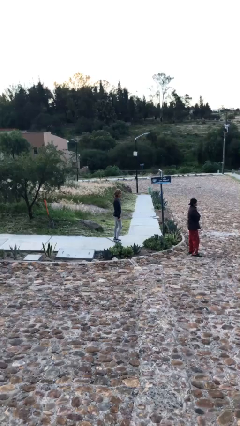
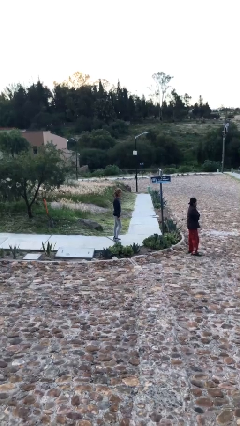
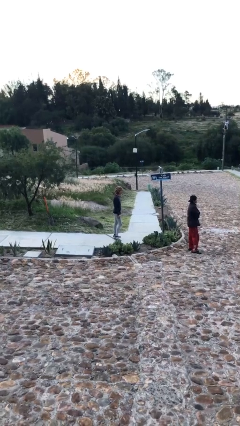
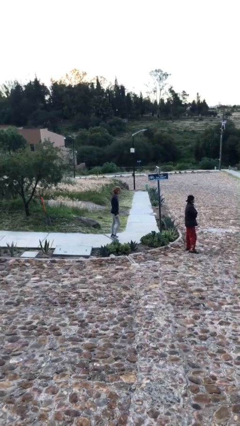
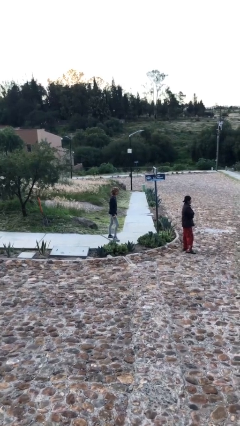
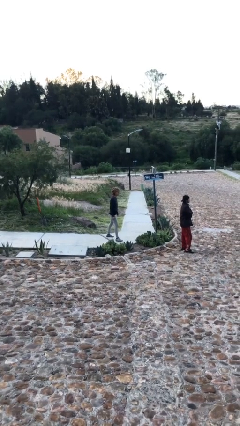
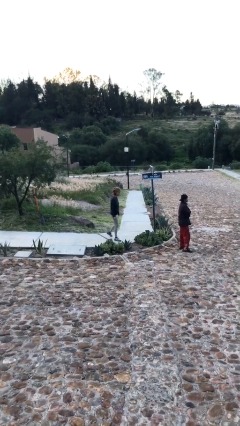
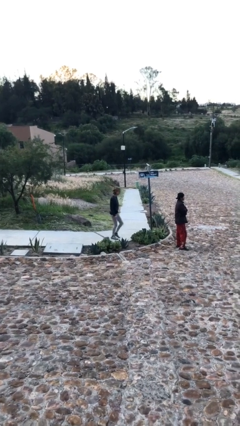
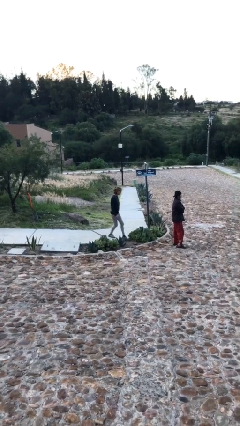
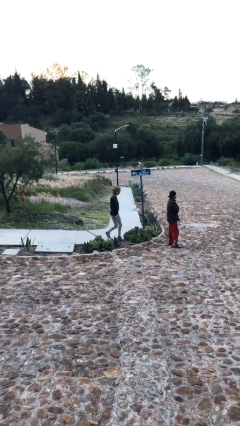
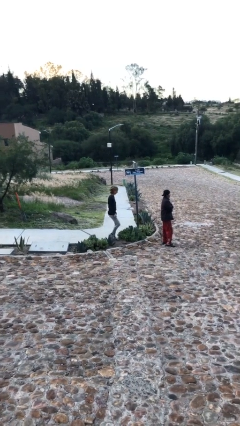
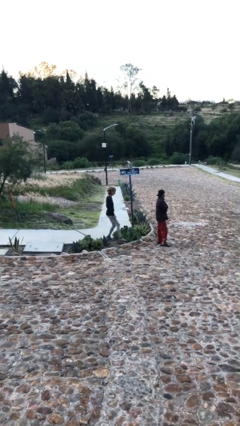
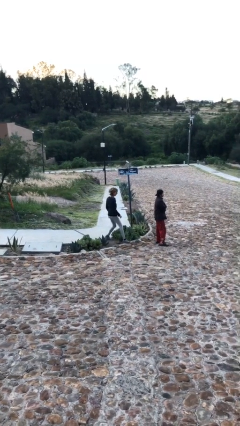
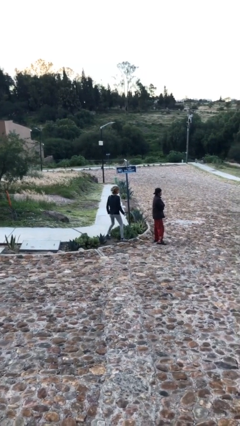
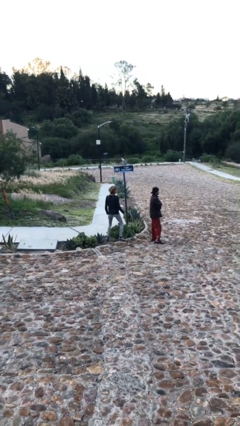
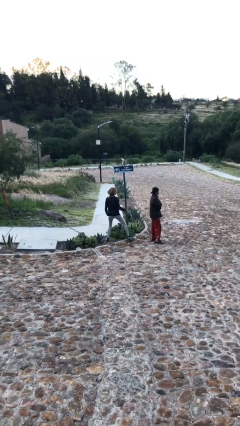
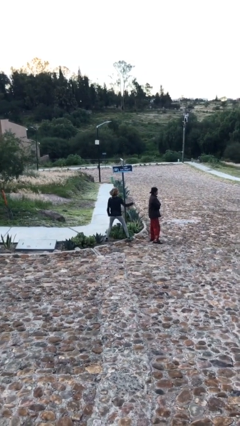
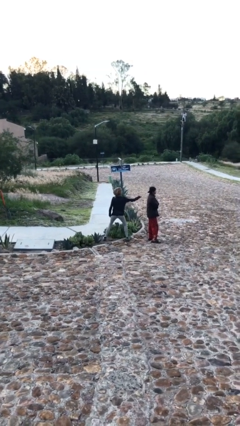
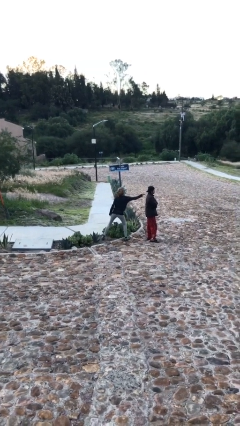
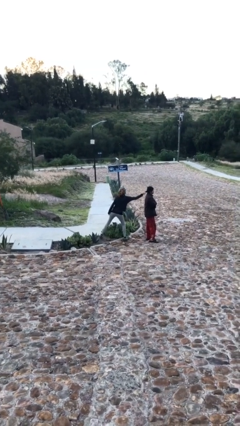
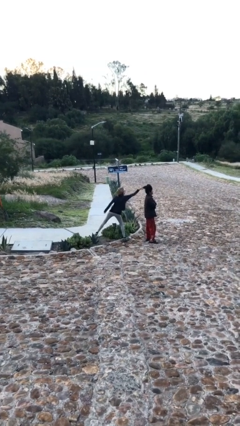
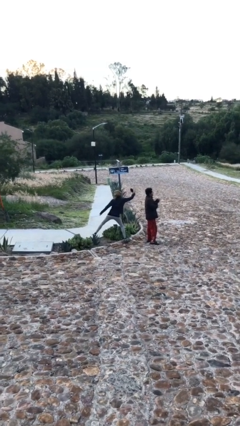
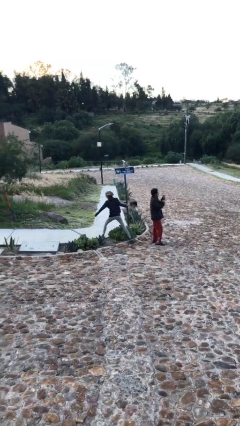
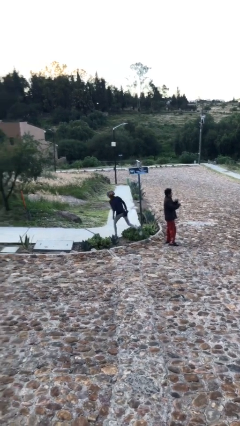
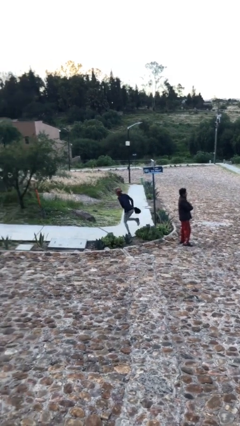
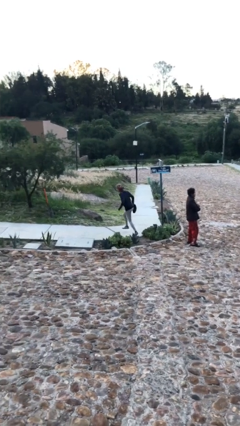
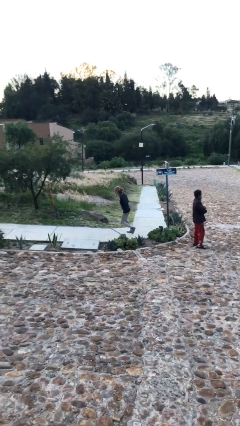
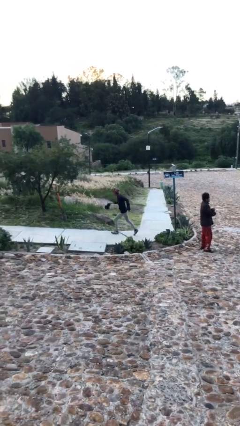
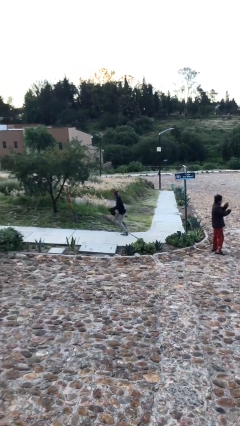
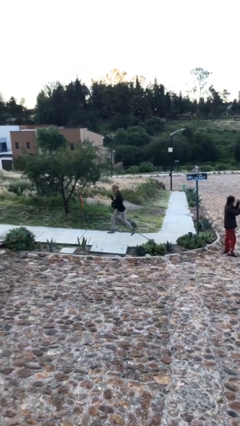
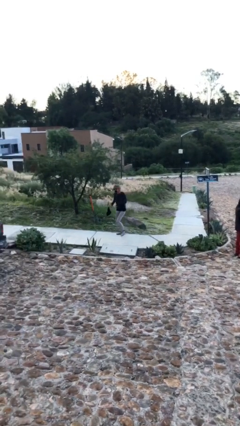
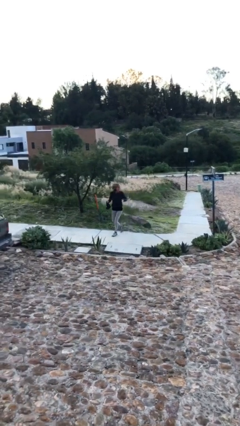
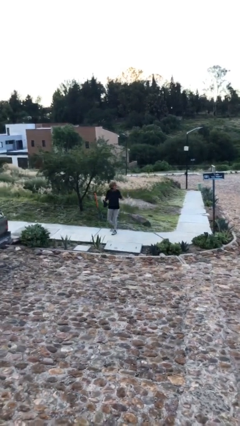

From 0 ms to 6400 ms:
person steals object from person

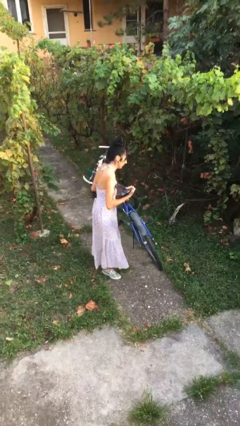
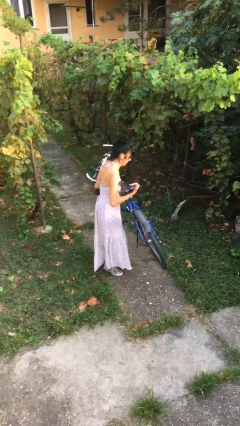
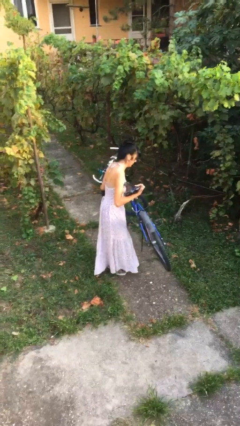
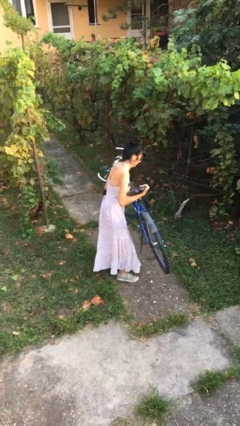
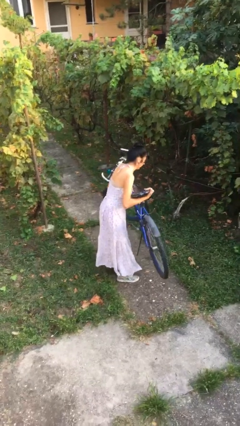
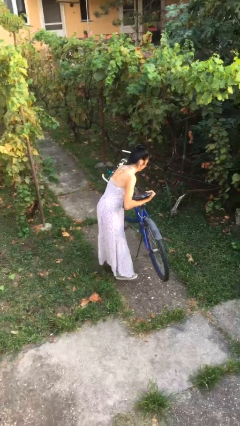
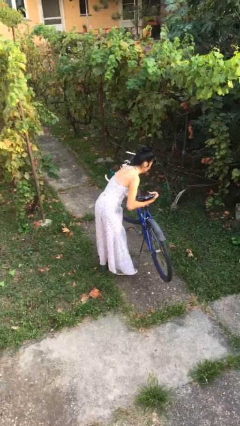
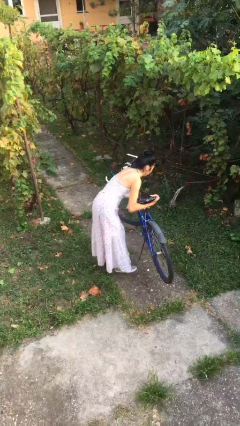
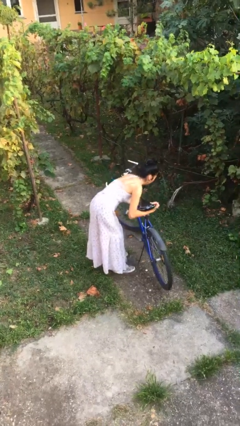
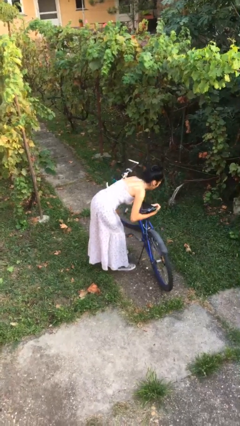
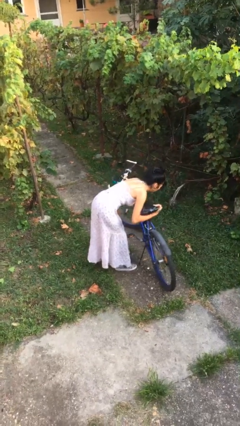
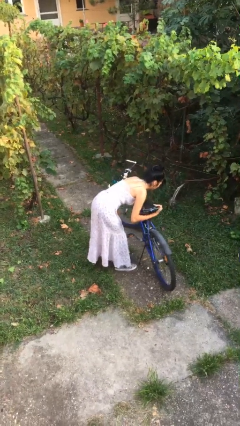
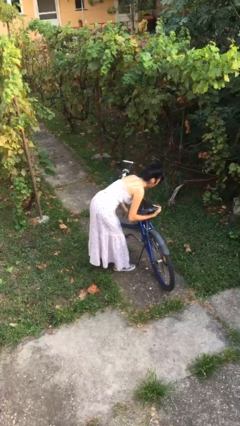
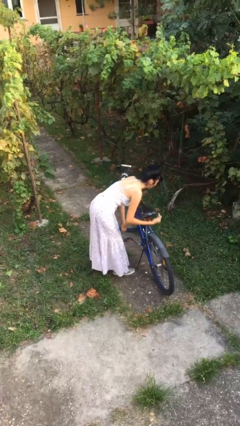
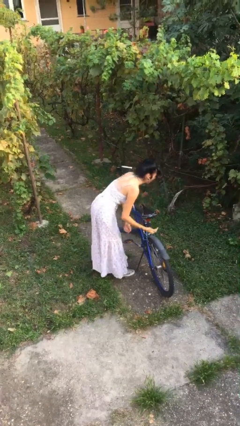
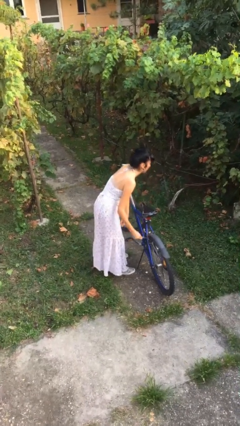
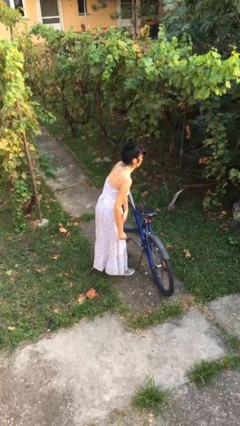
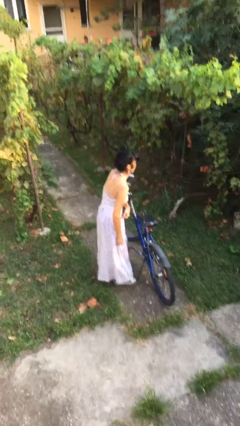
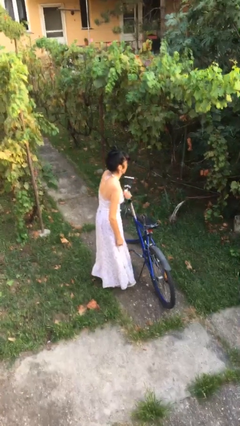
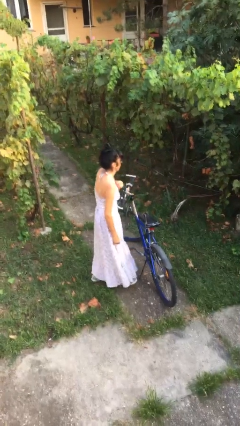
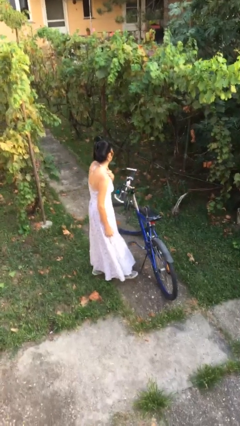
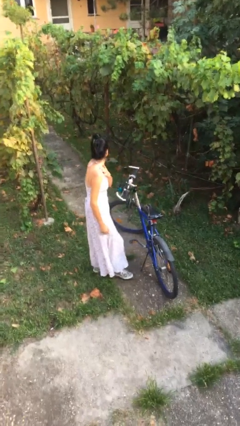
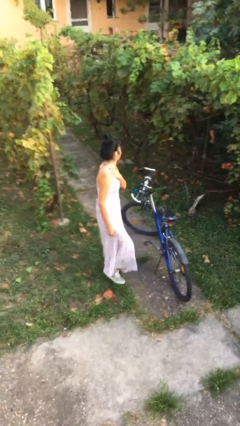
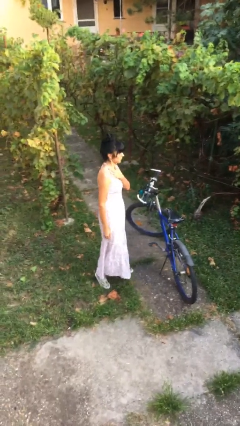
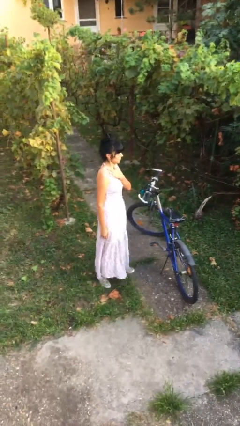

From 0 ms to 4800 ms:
person puts down object on floor

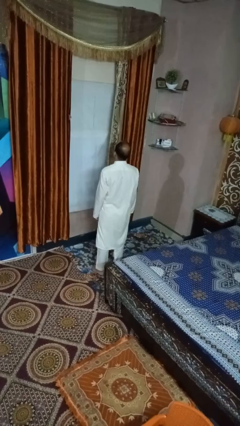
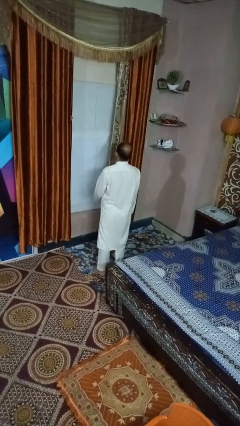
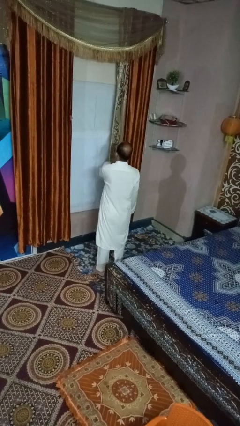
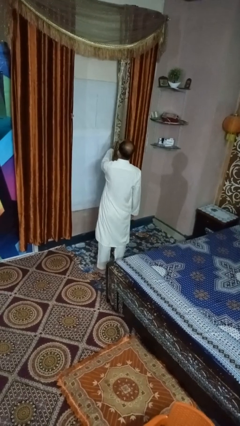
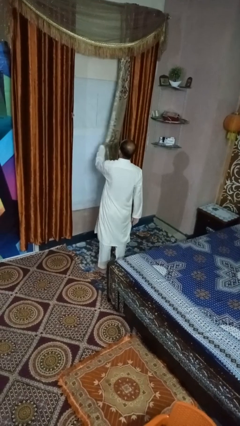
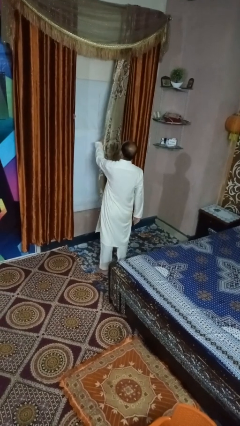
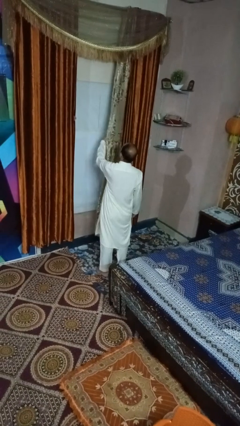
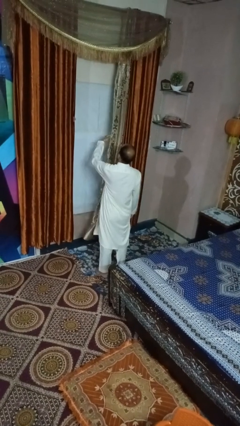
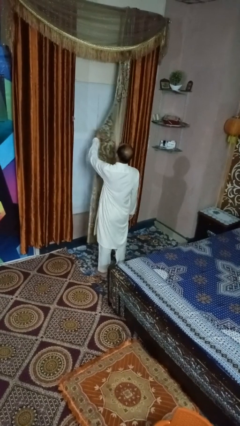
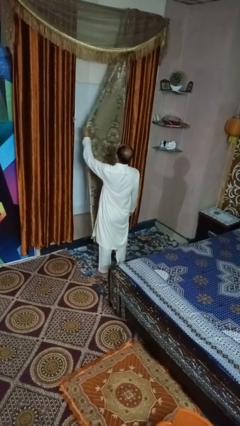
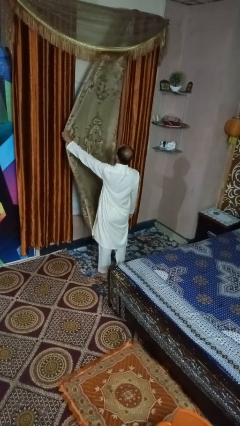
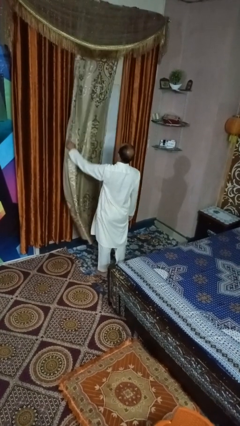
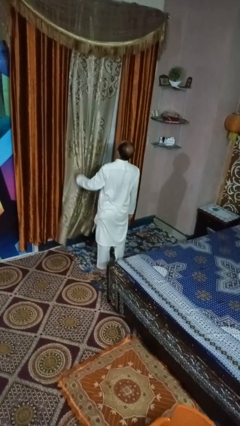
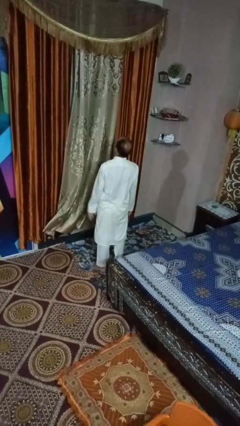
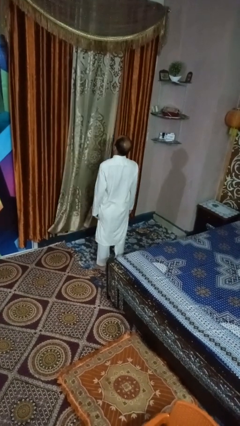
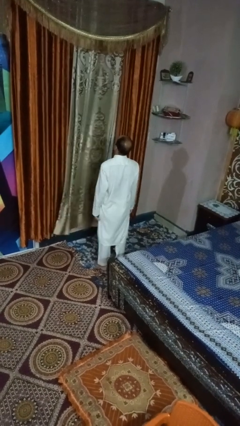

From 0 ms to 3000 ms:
person closes curtains

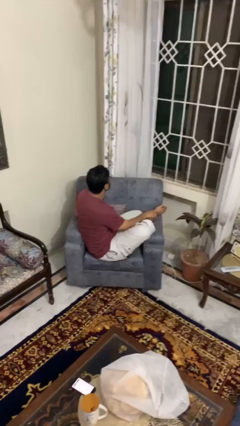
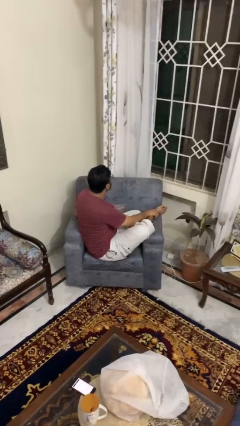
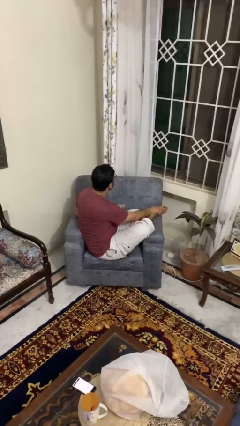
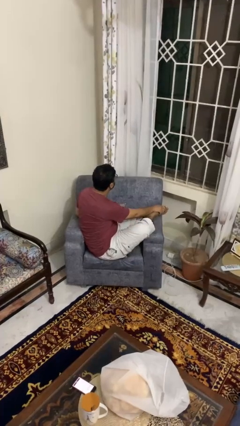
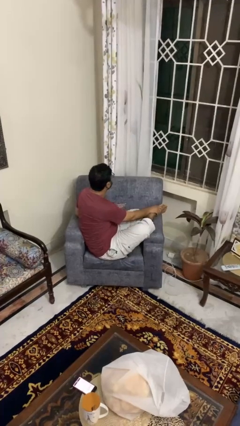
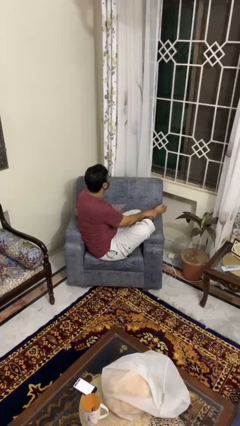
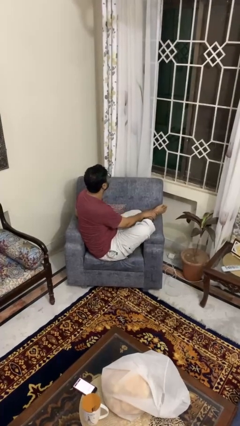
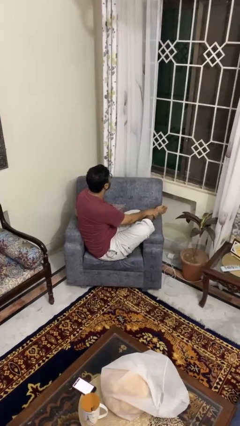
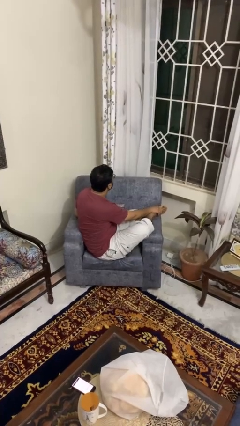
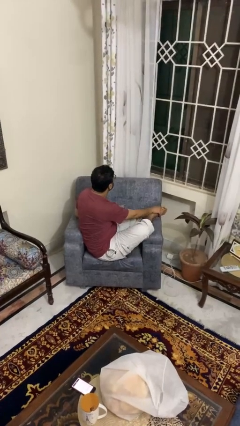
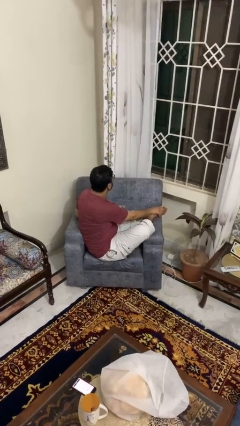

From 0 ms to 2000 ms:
person rubs foot

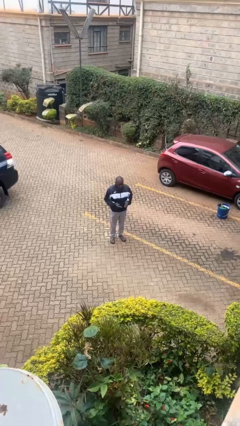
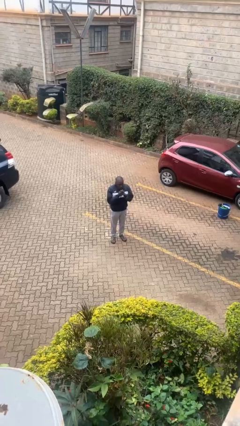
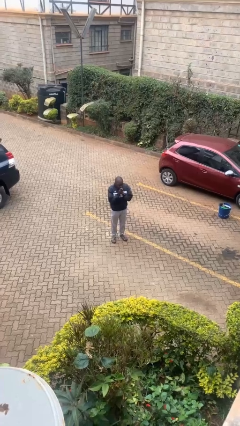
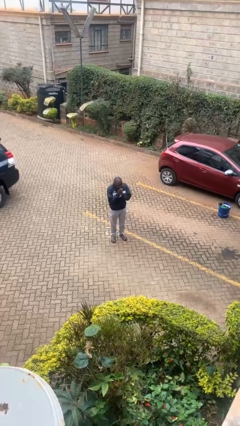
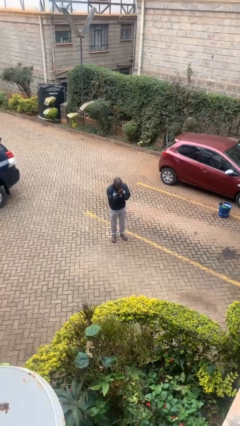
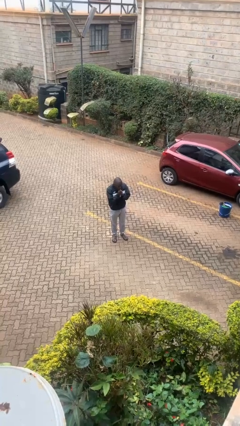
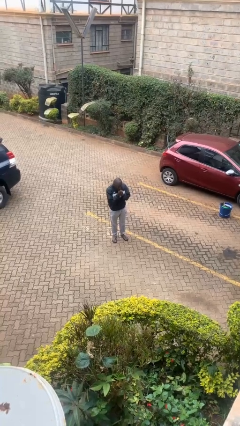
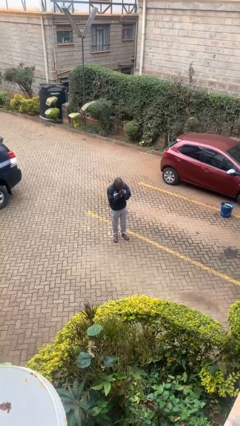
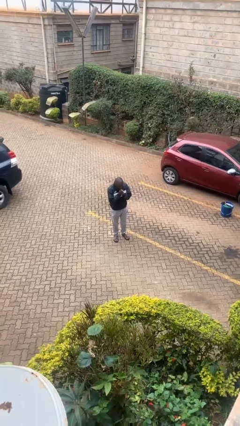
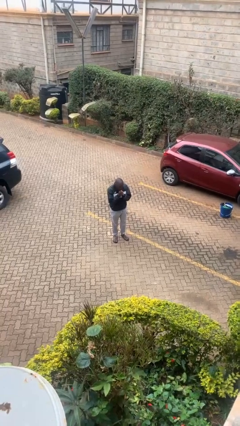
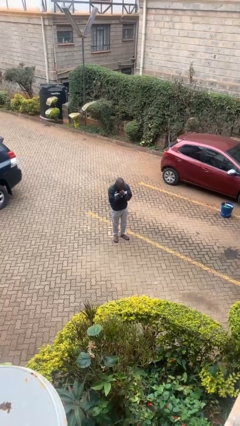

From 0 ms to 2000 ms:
person blows into hands
